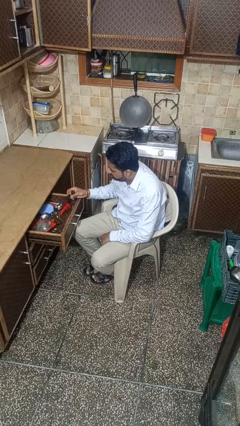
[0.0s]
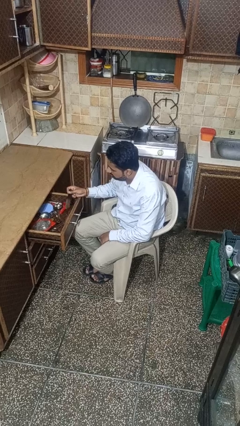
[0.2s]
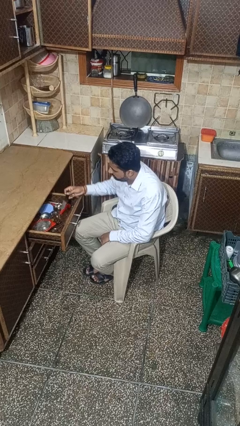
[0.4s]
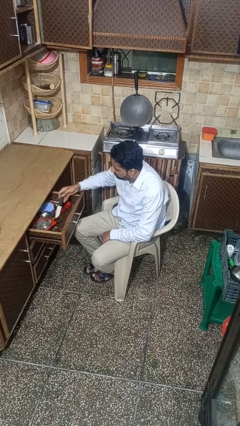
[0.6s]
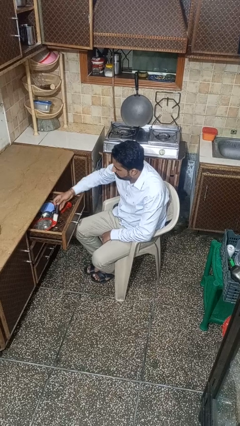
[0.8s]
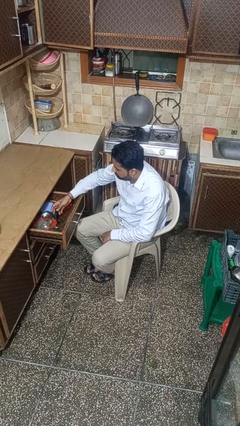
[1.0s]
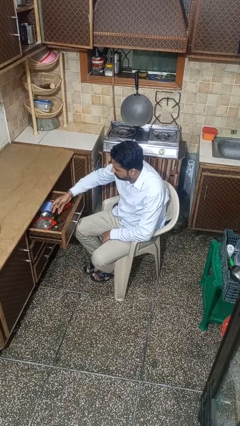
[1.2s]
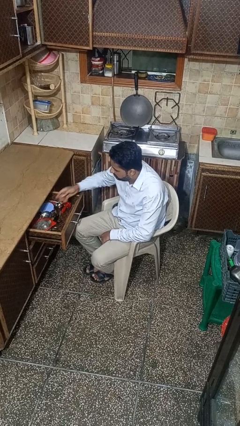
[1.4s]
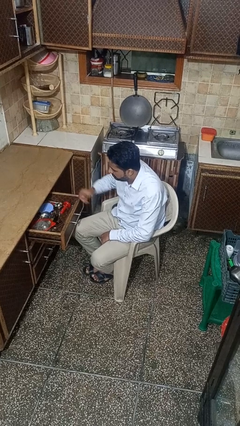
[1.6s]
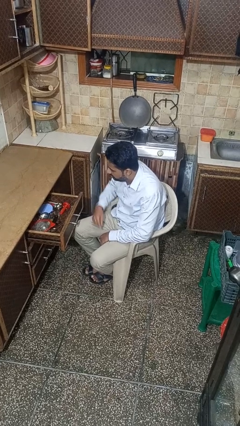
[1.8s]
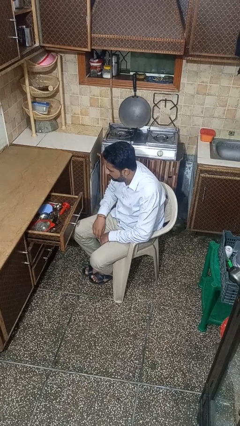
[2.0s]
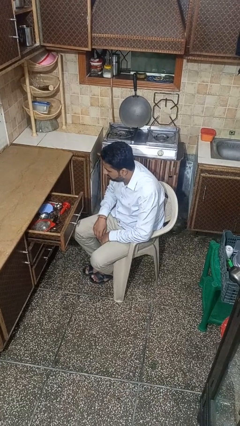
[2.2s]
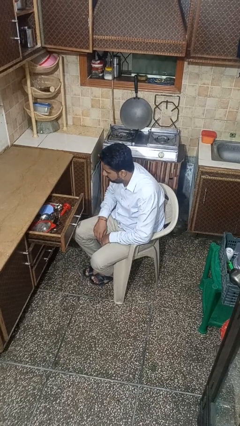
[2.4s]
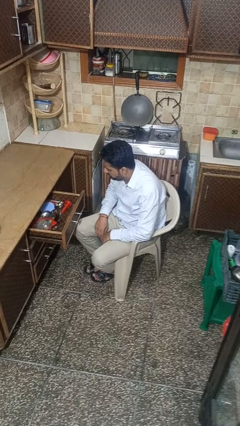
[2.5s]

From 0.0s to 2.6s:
person puts object into kitchen drawer

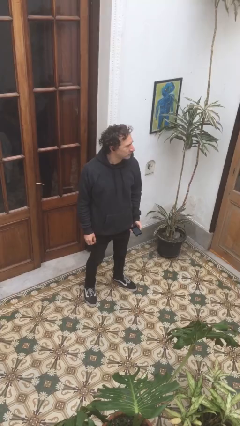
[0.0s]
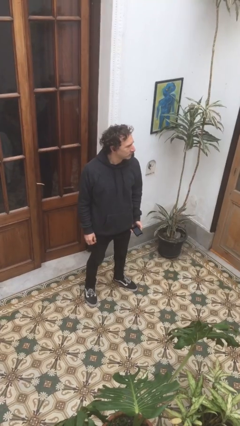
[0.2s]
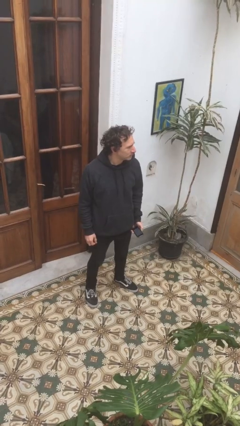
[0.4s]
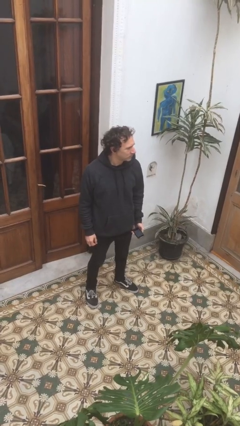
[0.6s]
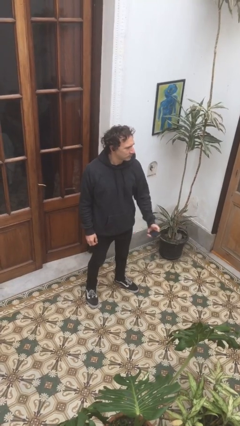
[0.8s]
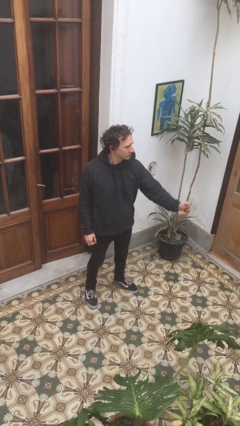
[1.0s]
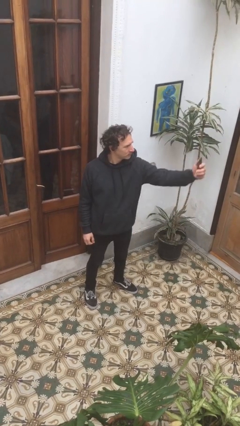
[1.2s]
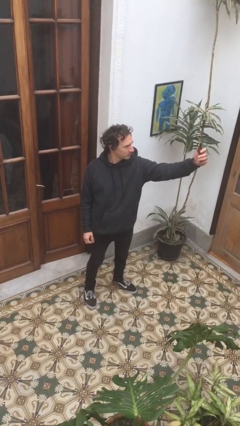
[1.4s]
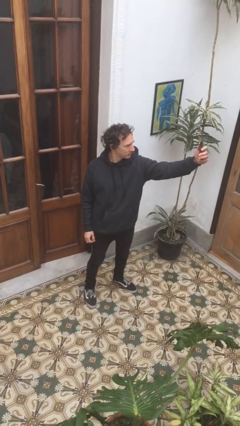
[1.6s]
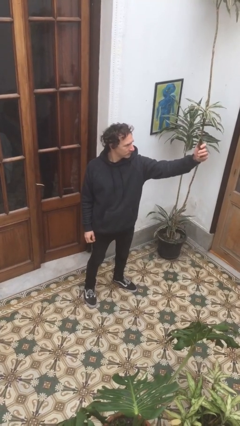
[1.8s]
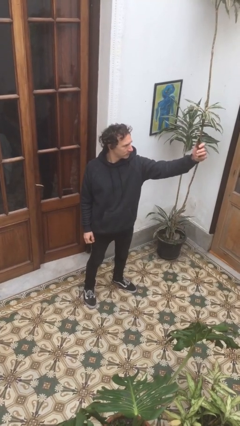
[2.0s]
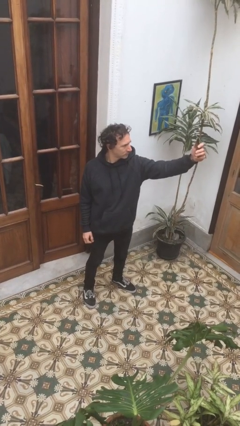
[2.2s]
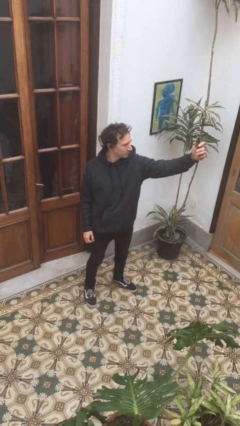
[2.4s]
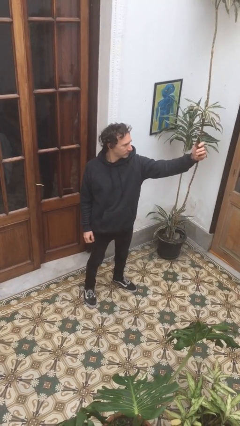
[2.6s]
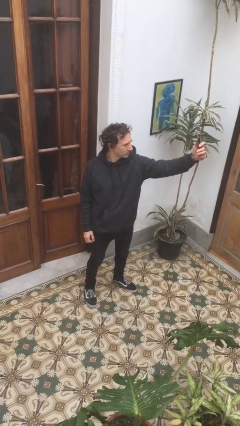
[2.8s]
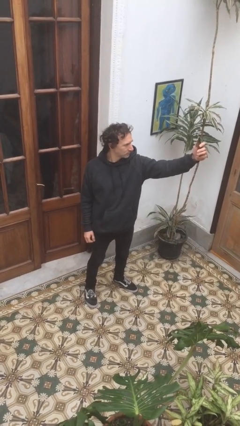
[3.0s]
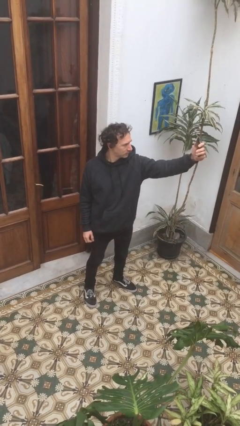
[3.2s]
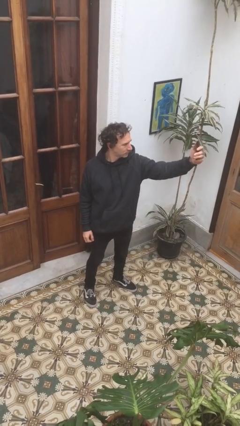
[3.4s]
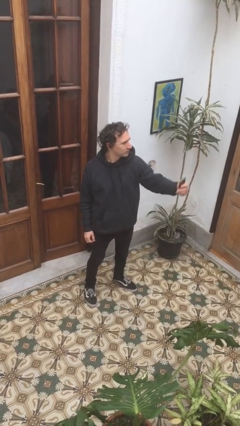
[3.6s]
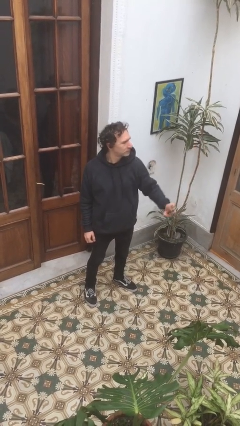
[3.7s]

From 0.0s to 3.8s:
person takes selfie

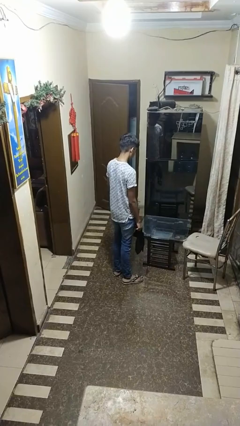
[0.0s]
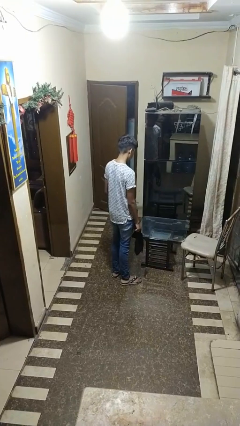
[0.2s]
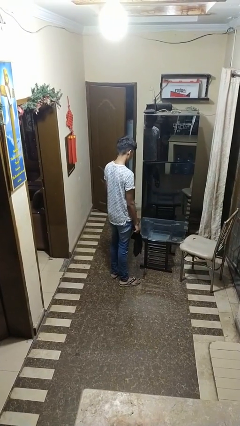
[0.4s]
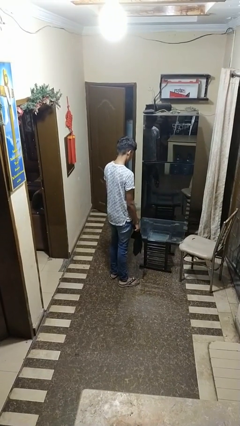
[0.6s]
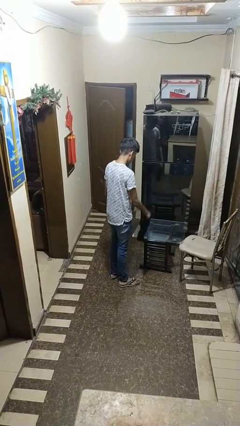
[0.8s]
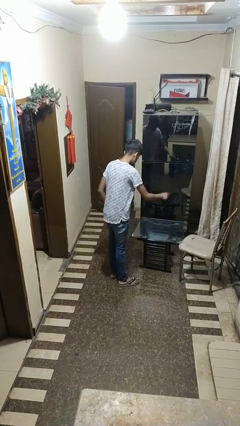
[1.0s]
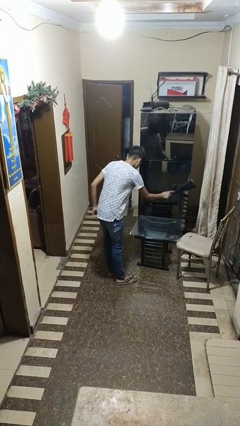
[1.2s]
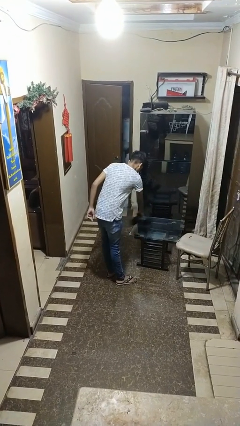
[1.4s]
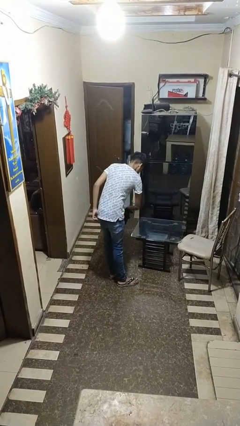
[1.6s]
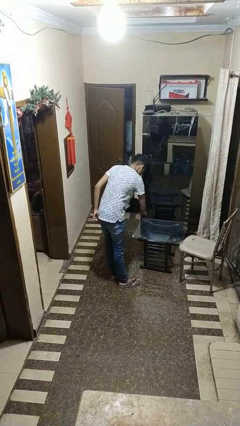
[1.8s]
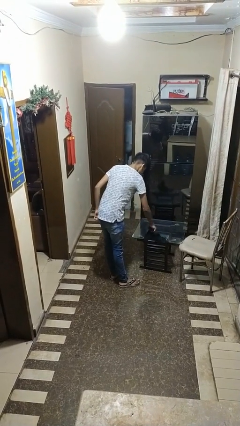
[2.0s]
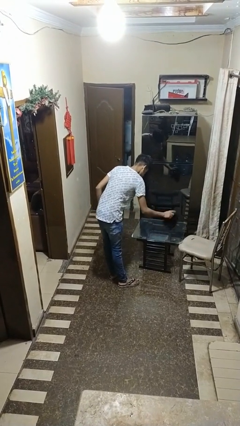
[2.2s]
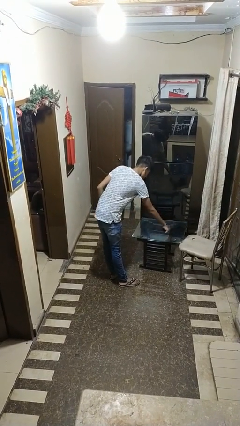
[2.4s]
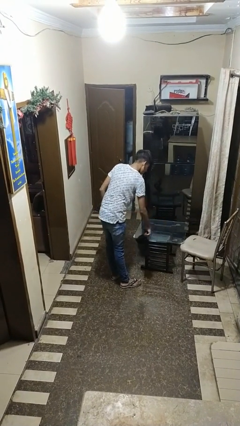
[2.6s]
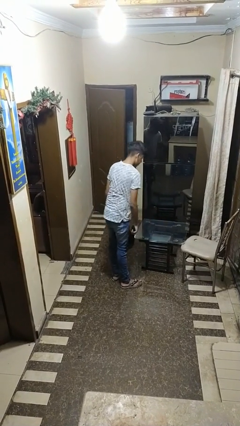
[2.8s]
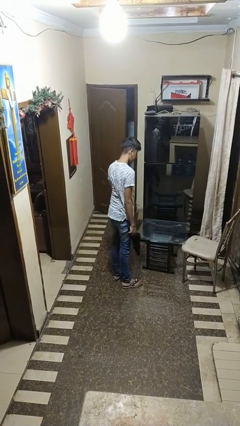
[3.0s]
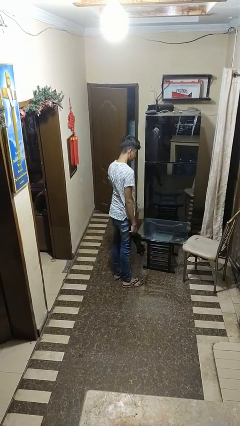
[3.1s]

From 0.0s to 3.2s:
person dusts furniture

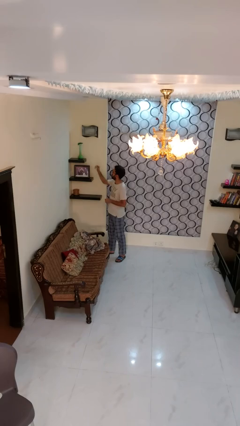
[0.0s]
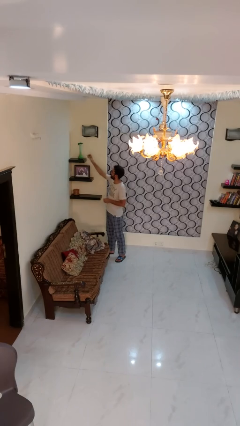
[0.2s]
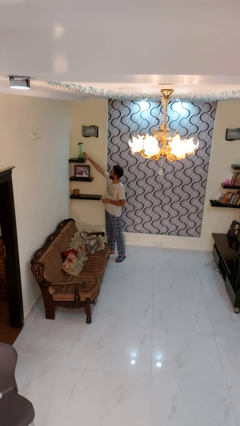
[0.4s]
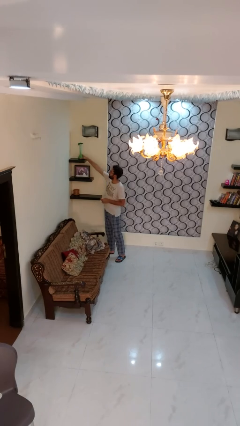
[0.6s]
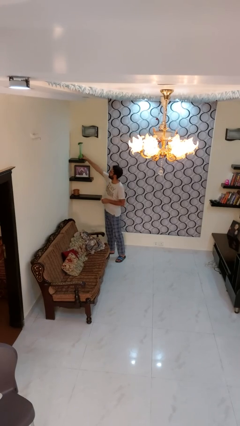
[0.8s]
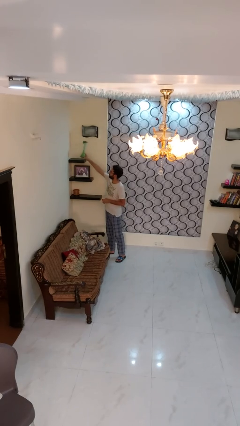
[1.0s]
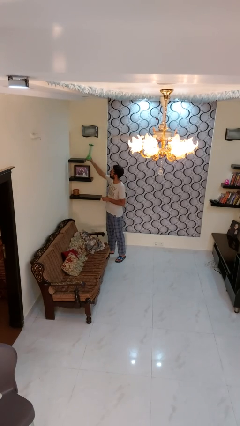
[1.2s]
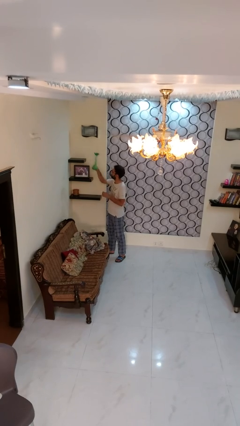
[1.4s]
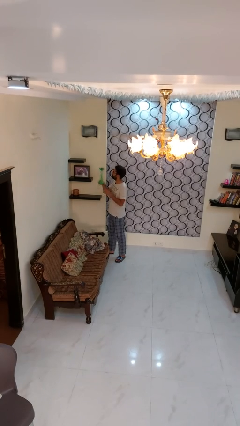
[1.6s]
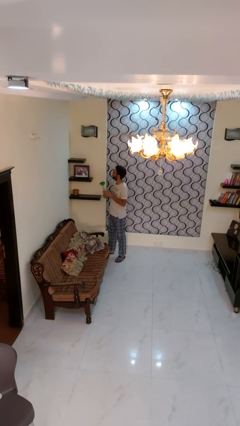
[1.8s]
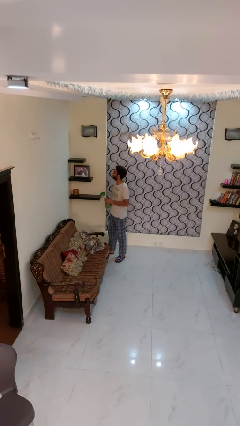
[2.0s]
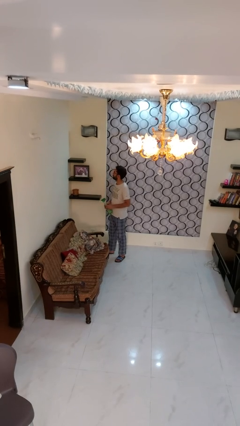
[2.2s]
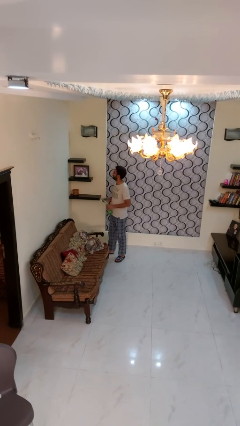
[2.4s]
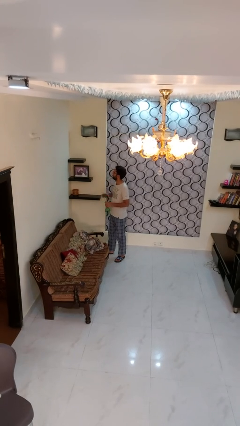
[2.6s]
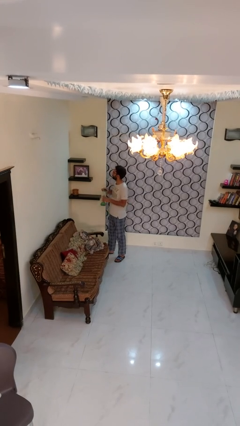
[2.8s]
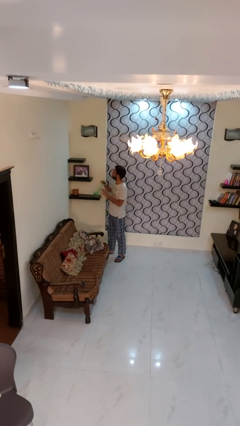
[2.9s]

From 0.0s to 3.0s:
person picks up object from shelf

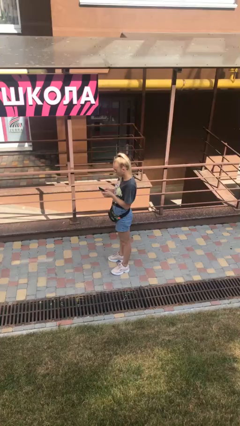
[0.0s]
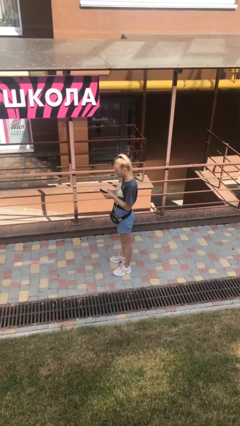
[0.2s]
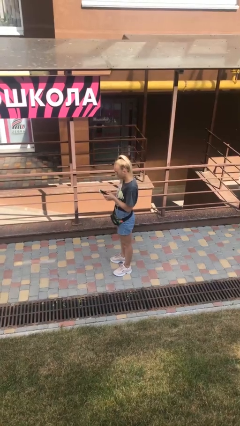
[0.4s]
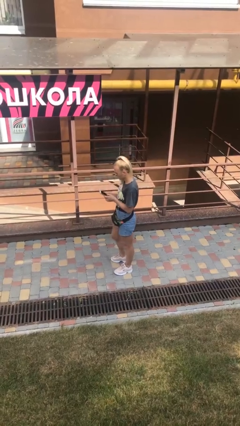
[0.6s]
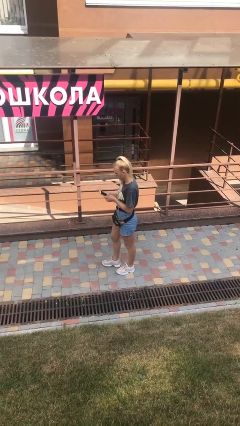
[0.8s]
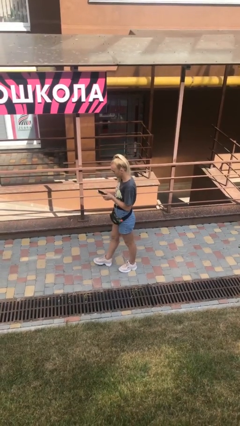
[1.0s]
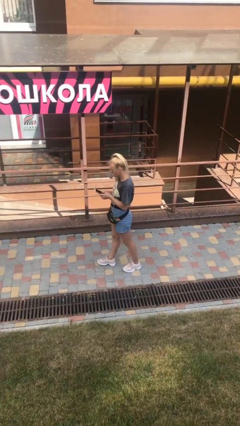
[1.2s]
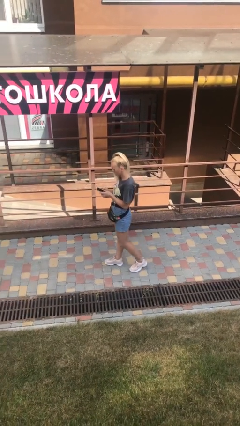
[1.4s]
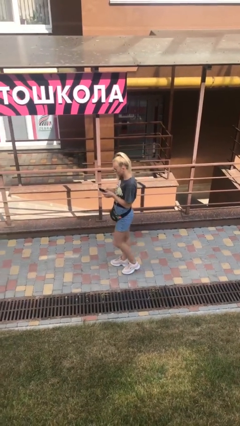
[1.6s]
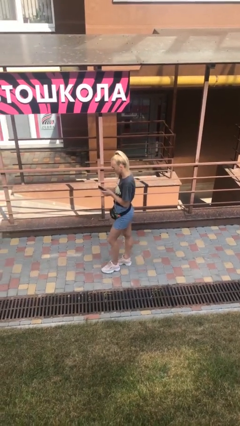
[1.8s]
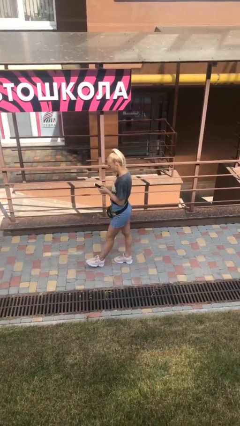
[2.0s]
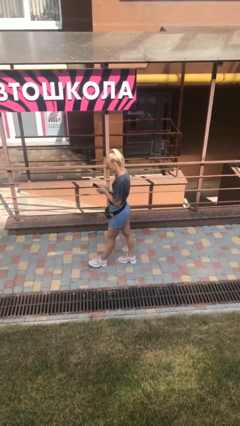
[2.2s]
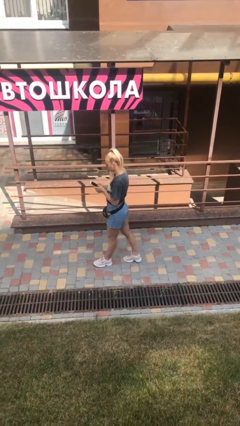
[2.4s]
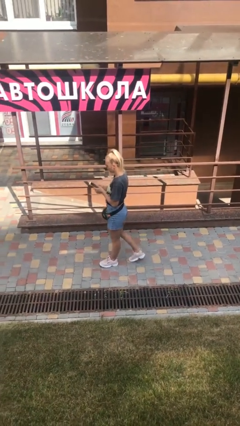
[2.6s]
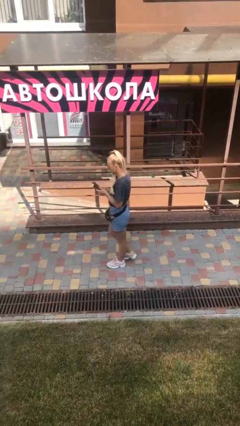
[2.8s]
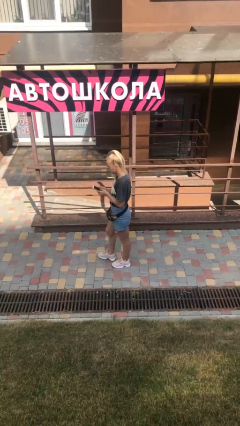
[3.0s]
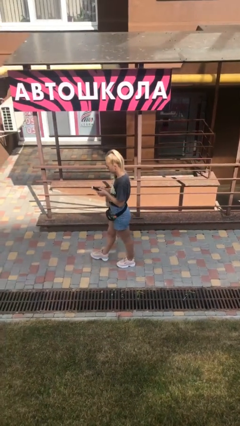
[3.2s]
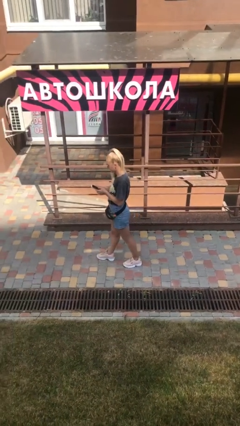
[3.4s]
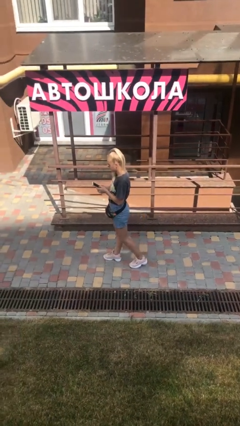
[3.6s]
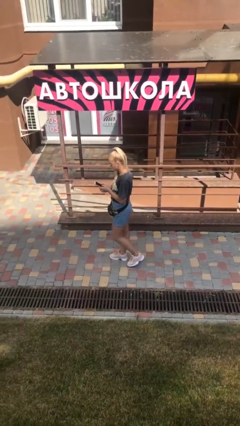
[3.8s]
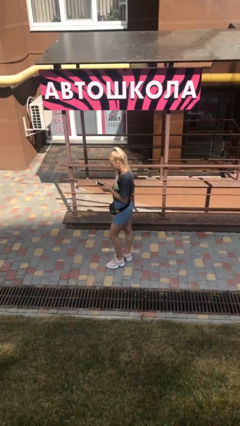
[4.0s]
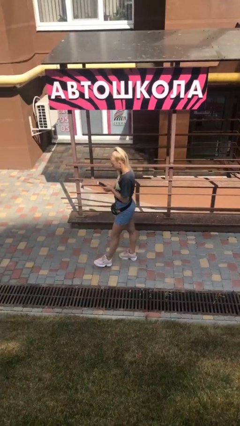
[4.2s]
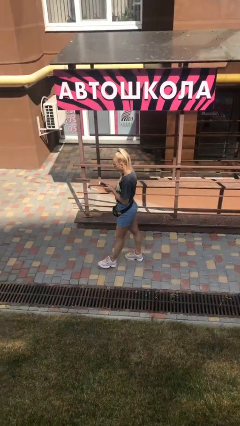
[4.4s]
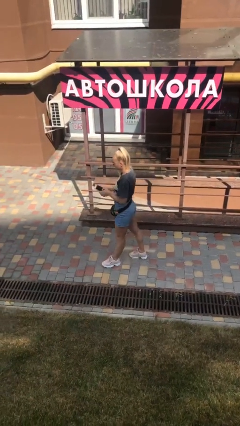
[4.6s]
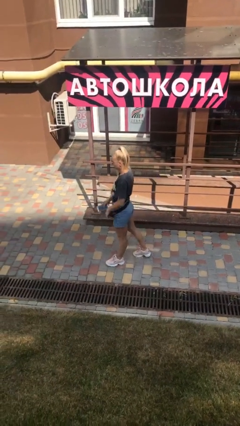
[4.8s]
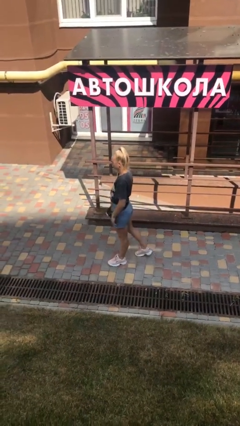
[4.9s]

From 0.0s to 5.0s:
person texts on phone
